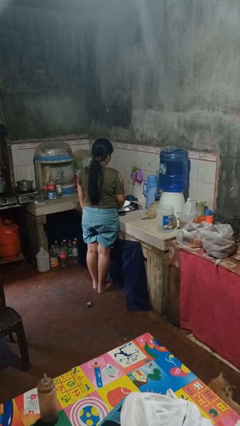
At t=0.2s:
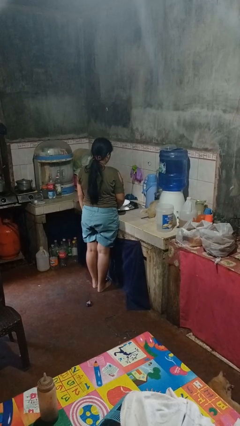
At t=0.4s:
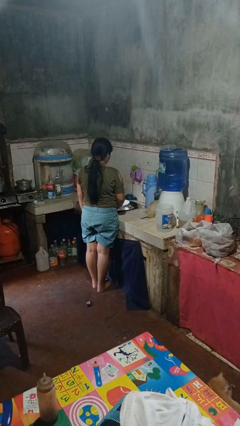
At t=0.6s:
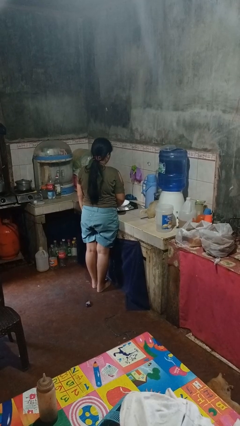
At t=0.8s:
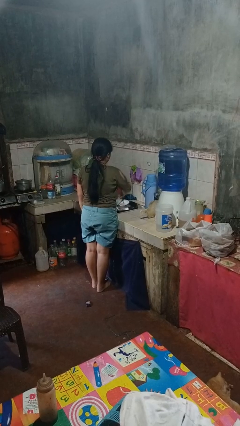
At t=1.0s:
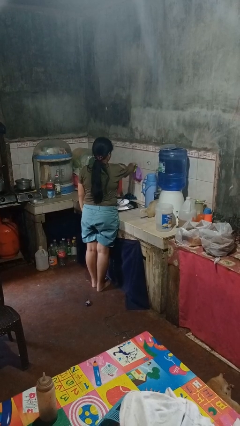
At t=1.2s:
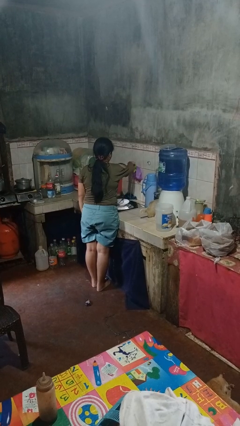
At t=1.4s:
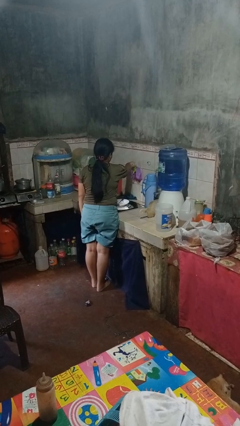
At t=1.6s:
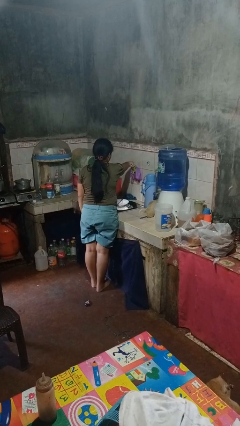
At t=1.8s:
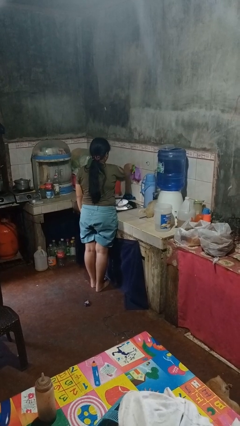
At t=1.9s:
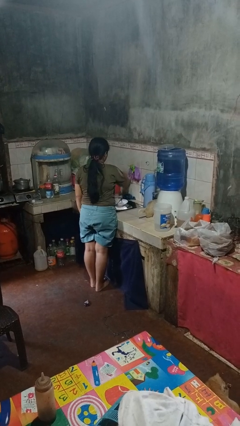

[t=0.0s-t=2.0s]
person turns off faucet

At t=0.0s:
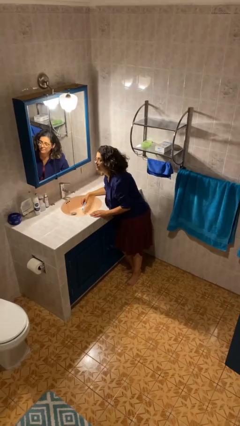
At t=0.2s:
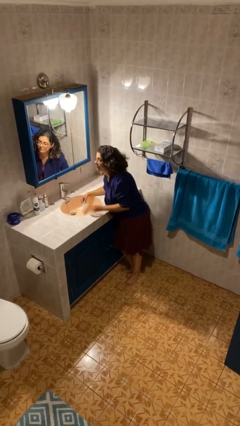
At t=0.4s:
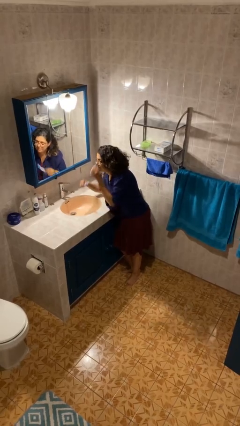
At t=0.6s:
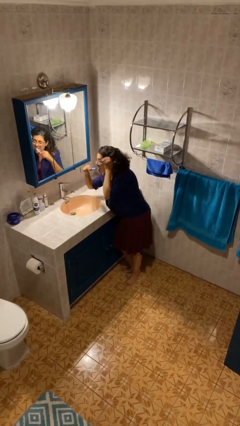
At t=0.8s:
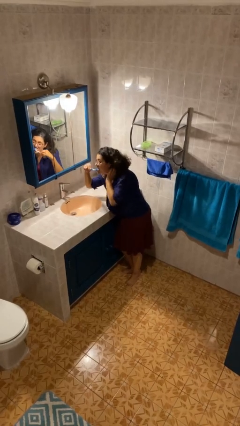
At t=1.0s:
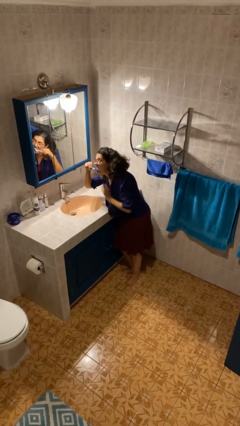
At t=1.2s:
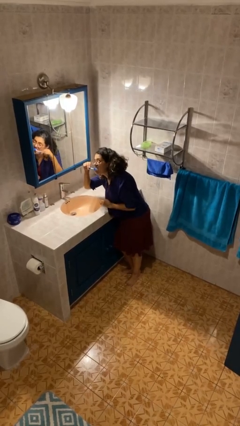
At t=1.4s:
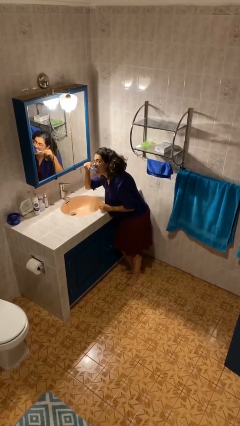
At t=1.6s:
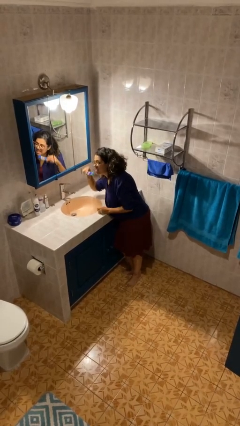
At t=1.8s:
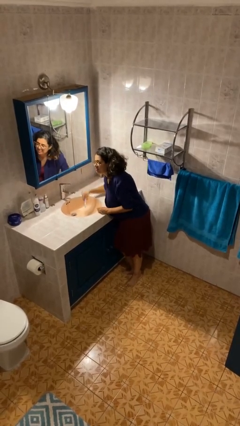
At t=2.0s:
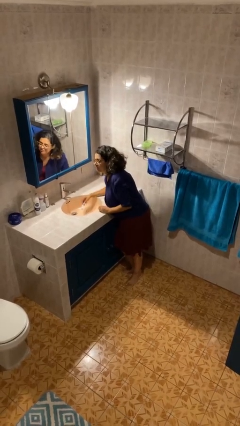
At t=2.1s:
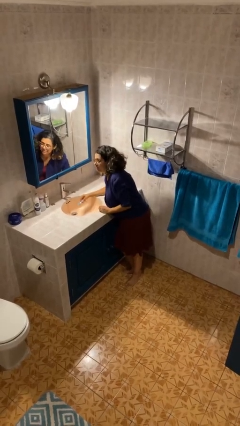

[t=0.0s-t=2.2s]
person brushes teeth

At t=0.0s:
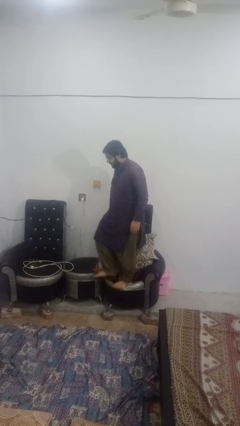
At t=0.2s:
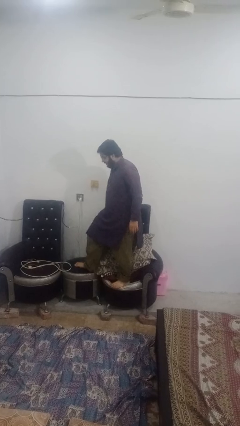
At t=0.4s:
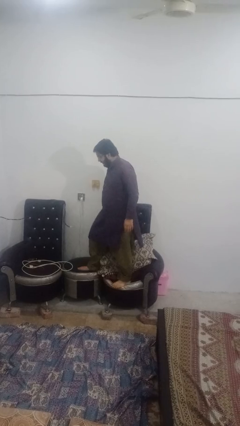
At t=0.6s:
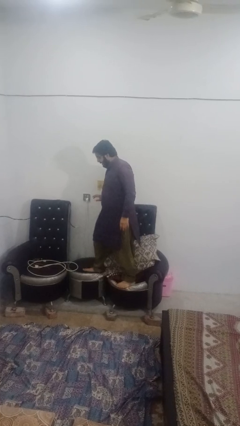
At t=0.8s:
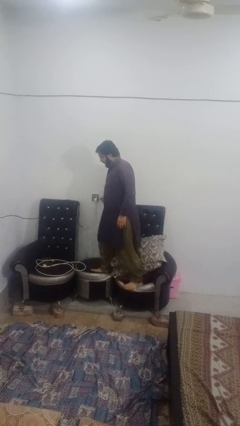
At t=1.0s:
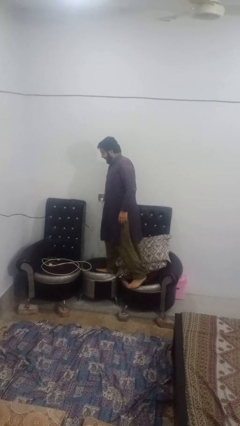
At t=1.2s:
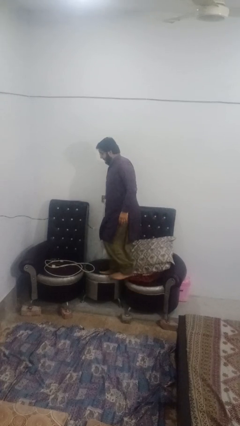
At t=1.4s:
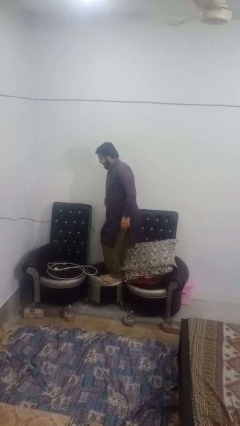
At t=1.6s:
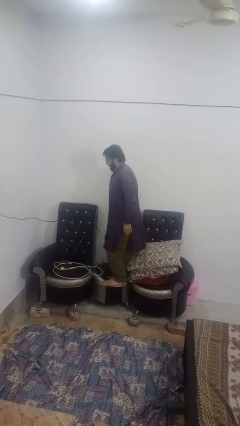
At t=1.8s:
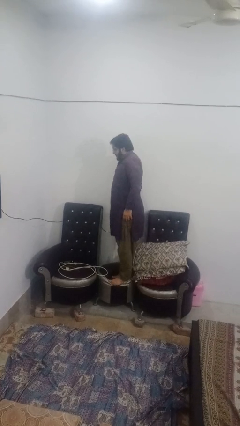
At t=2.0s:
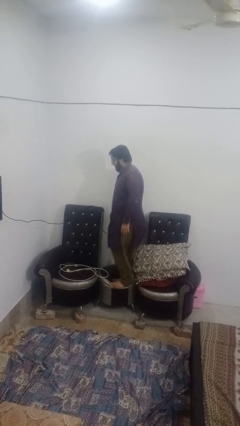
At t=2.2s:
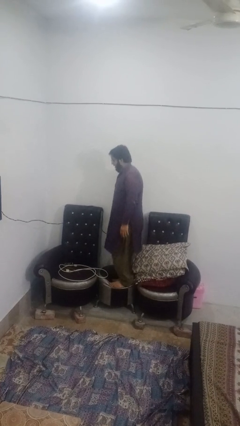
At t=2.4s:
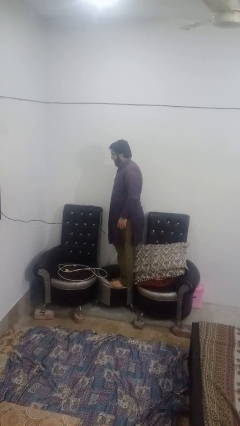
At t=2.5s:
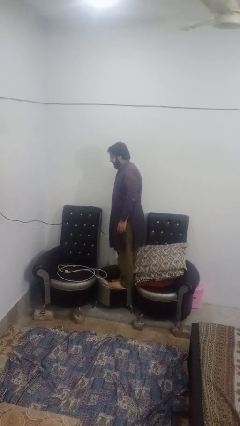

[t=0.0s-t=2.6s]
person jumps on couch

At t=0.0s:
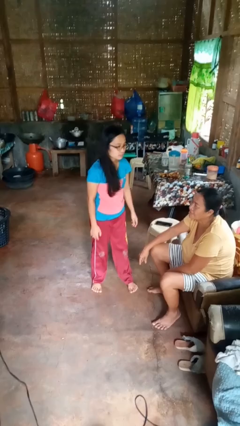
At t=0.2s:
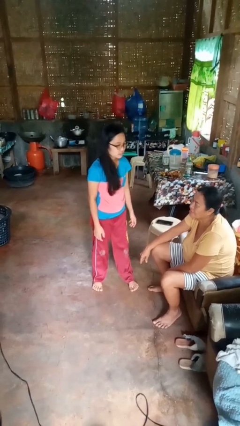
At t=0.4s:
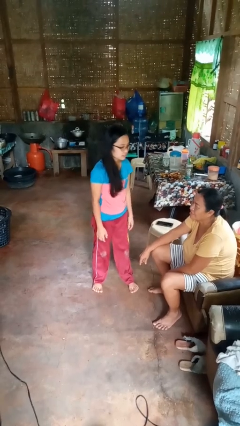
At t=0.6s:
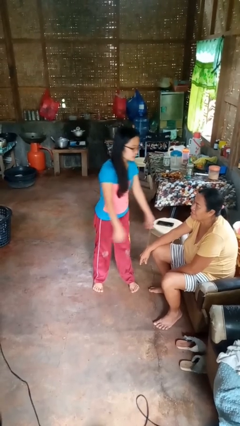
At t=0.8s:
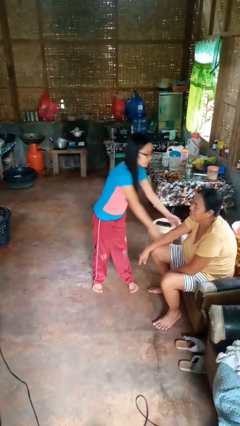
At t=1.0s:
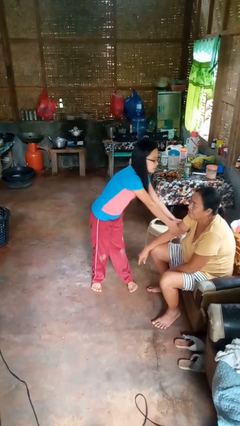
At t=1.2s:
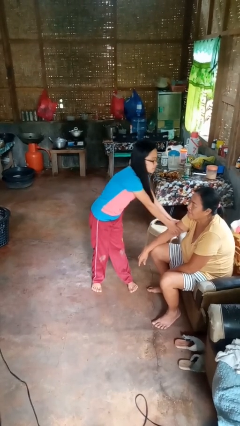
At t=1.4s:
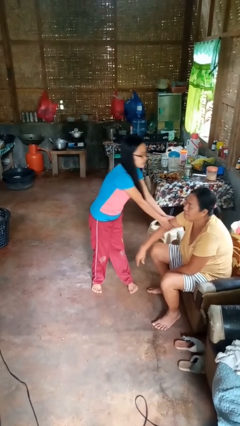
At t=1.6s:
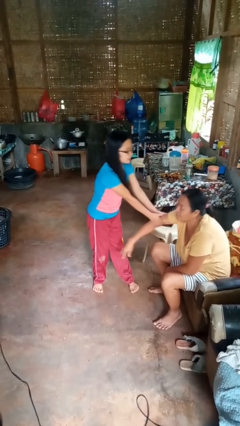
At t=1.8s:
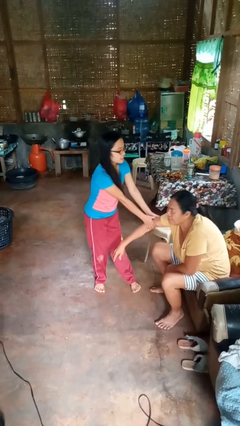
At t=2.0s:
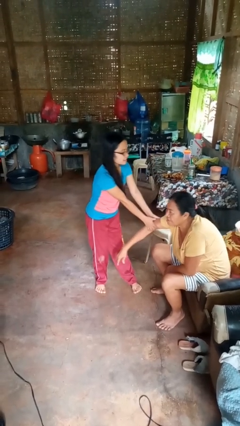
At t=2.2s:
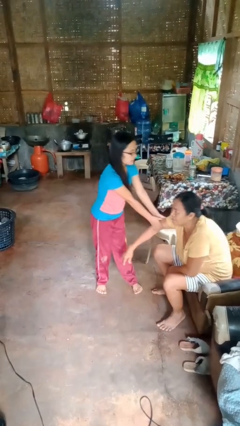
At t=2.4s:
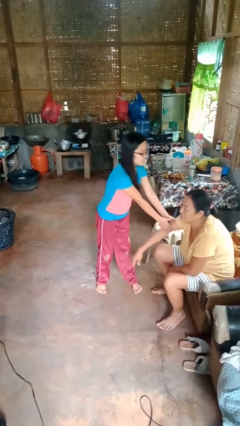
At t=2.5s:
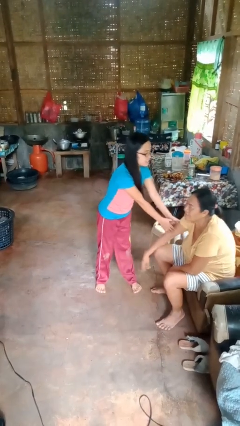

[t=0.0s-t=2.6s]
person grabs person by bicep

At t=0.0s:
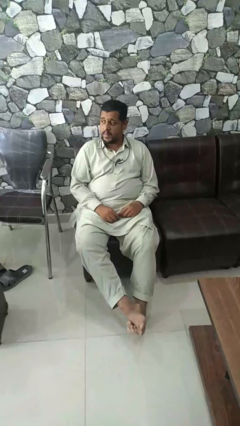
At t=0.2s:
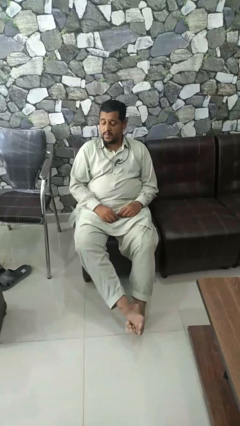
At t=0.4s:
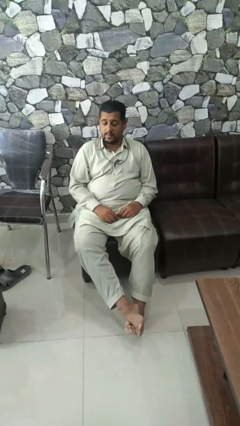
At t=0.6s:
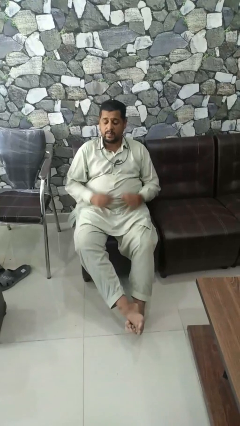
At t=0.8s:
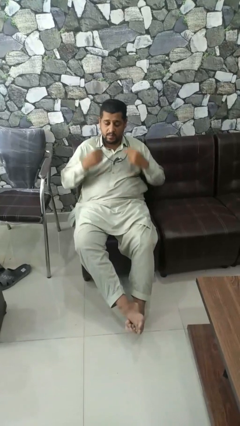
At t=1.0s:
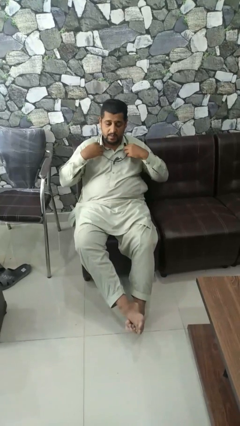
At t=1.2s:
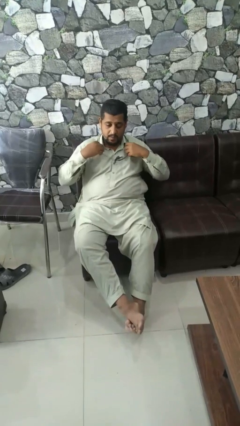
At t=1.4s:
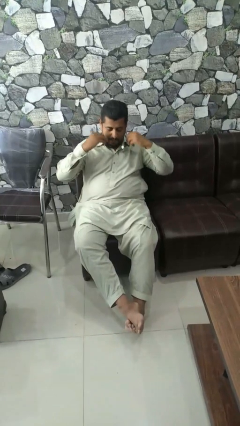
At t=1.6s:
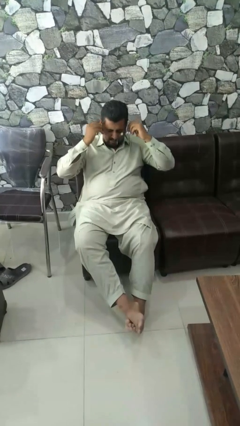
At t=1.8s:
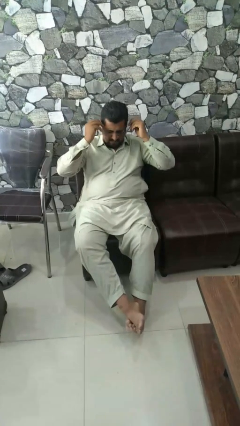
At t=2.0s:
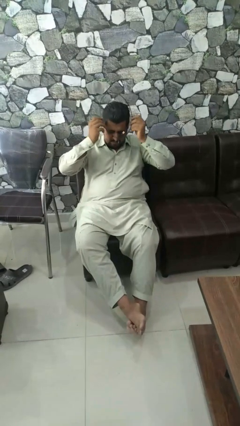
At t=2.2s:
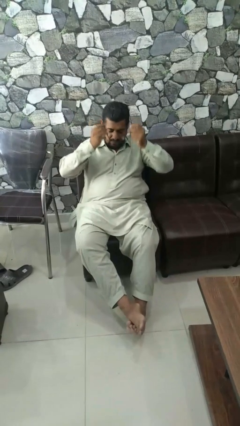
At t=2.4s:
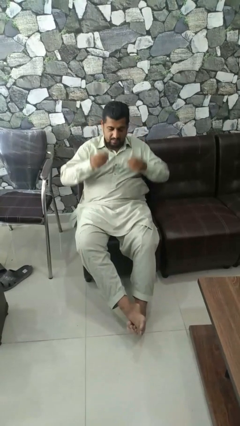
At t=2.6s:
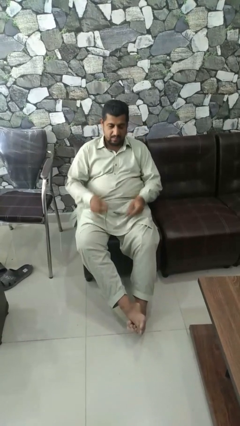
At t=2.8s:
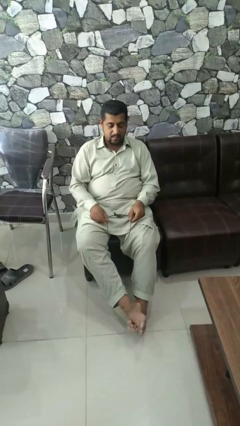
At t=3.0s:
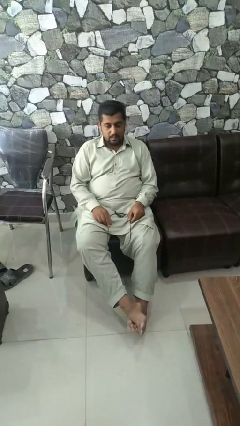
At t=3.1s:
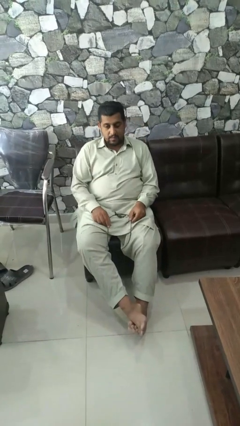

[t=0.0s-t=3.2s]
person takes off necklace

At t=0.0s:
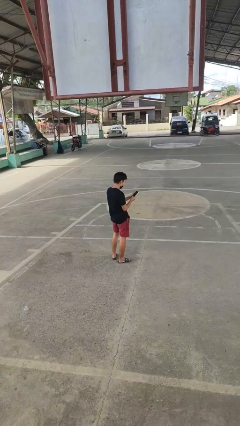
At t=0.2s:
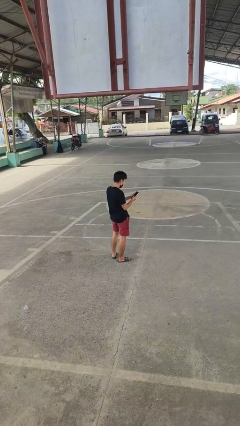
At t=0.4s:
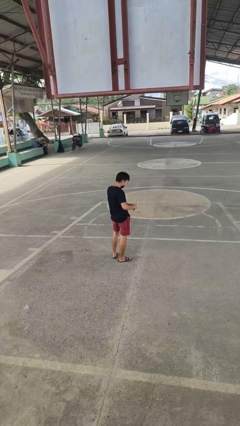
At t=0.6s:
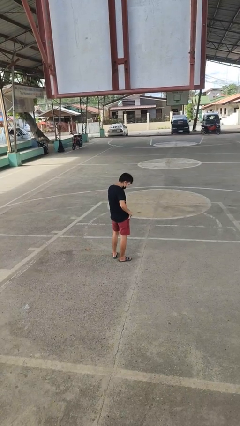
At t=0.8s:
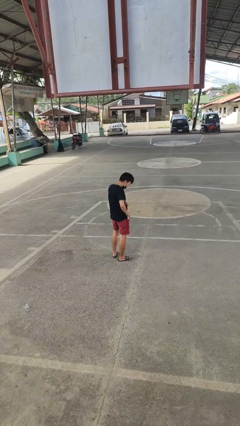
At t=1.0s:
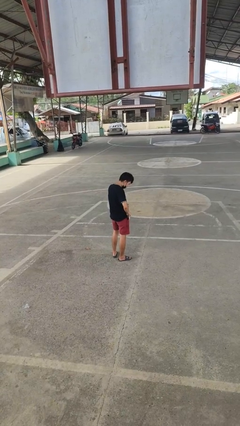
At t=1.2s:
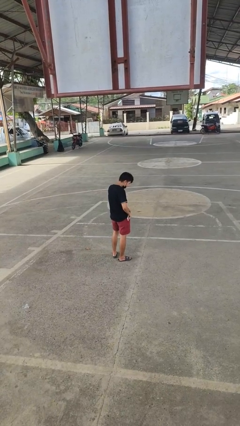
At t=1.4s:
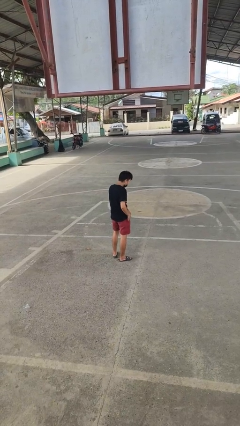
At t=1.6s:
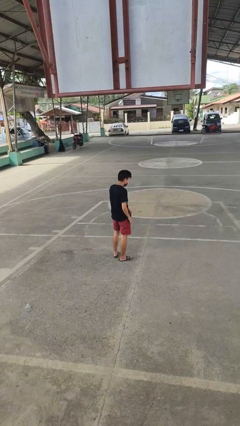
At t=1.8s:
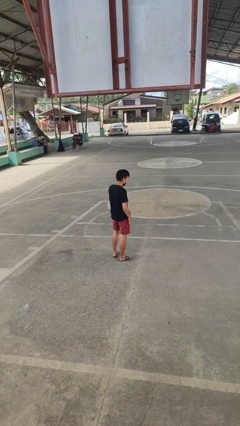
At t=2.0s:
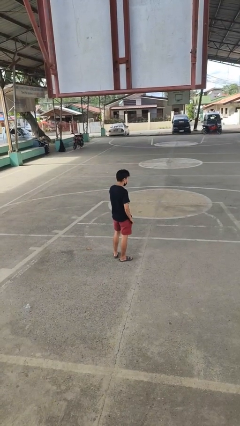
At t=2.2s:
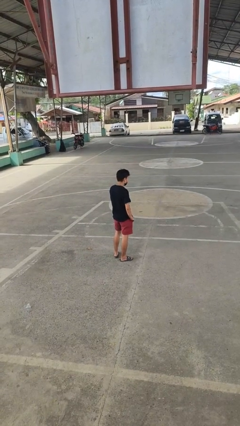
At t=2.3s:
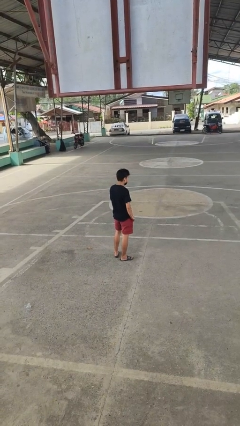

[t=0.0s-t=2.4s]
person puts phone into pocket

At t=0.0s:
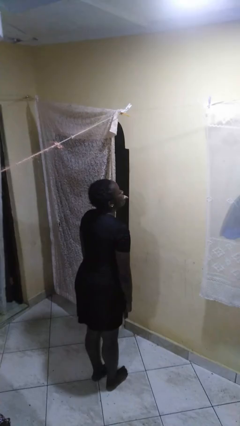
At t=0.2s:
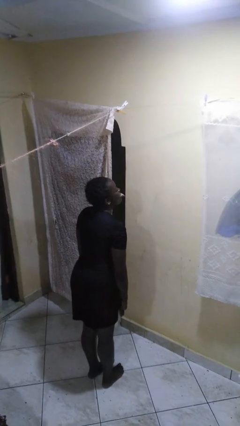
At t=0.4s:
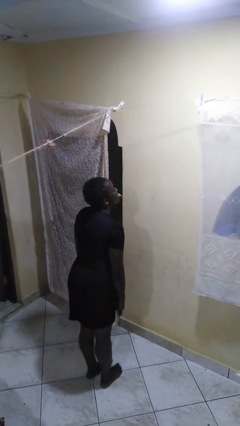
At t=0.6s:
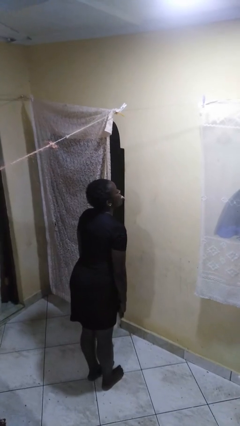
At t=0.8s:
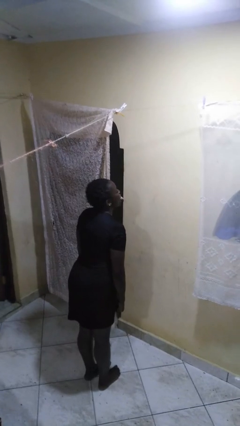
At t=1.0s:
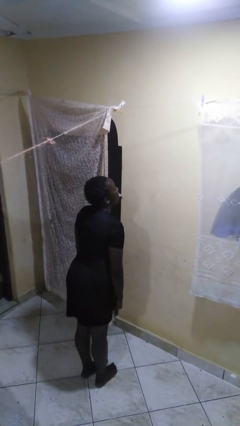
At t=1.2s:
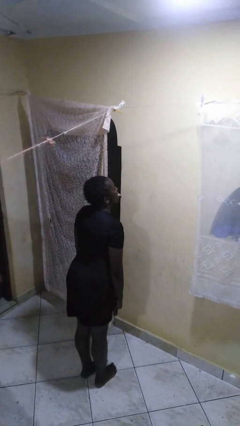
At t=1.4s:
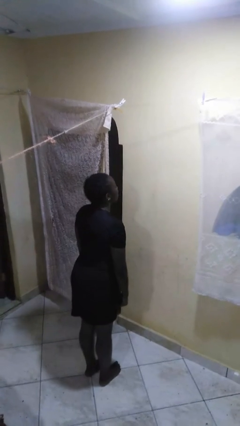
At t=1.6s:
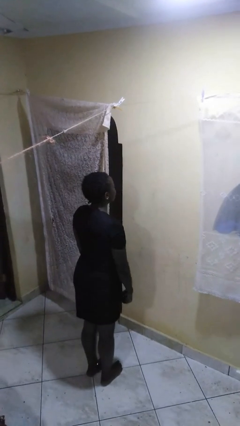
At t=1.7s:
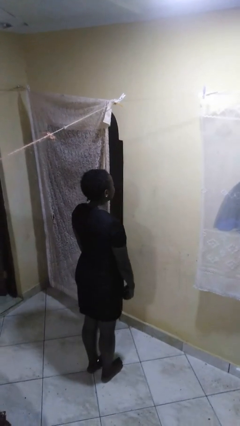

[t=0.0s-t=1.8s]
person sticks out tongue

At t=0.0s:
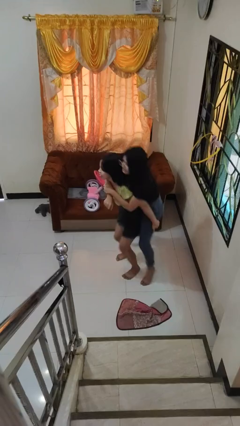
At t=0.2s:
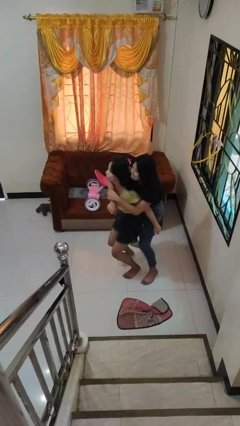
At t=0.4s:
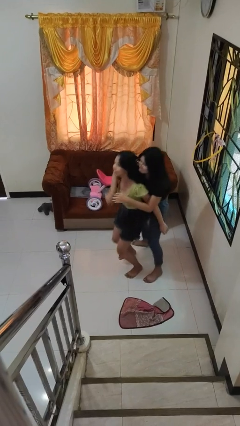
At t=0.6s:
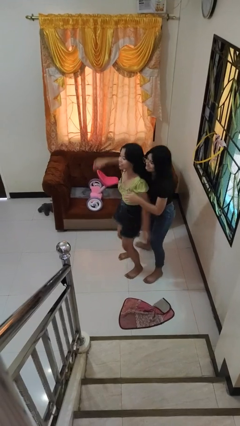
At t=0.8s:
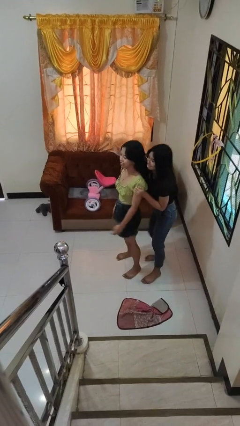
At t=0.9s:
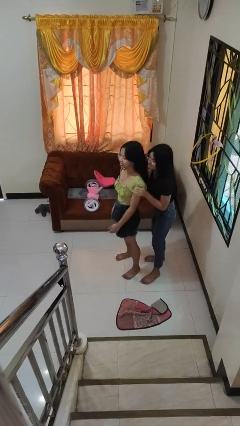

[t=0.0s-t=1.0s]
person puts down person
